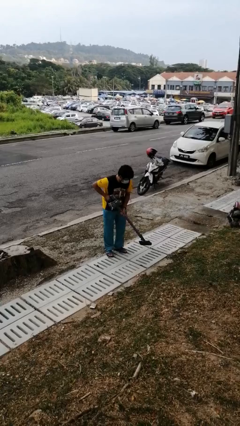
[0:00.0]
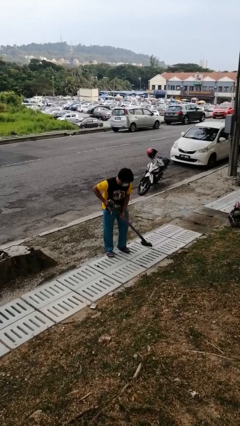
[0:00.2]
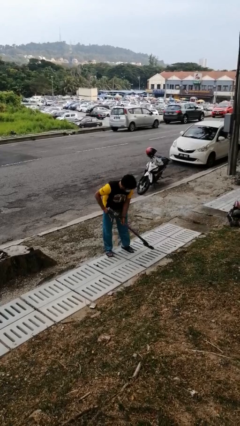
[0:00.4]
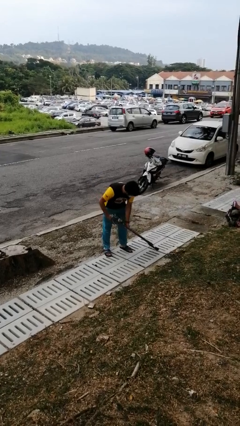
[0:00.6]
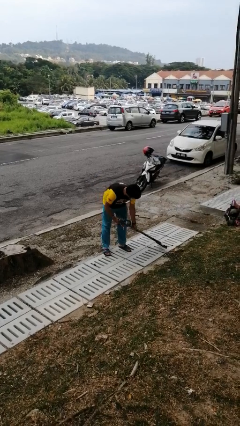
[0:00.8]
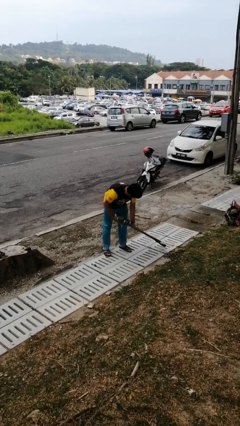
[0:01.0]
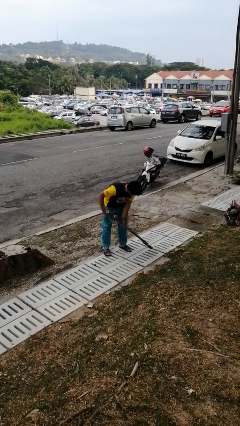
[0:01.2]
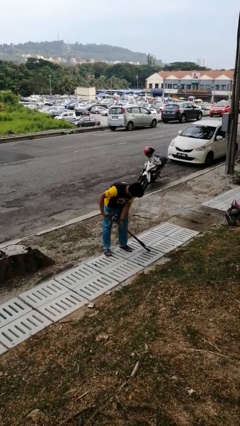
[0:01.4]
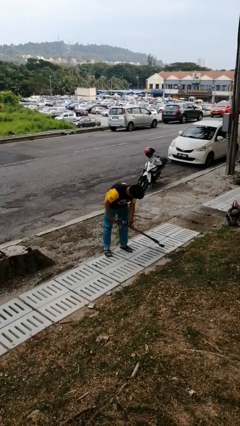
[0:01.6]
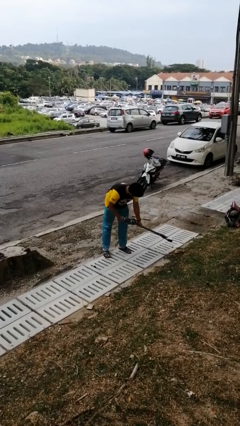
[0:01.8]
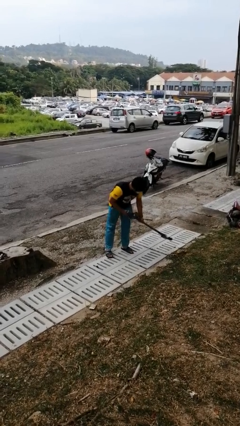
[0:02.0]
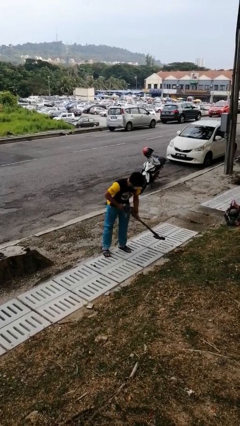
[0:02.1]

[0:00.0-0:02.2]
person vacuums carpet

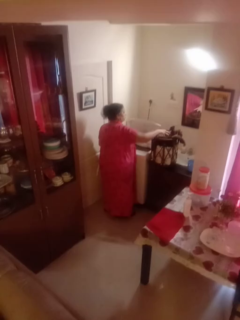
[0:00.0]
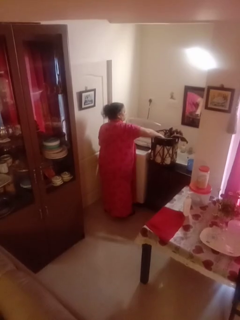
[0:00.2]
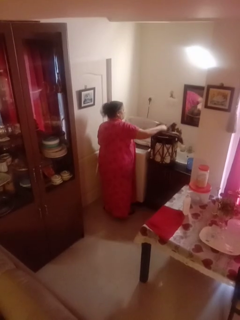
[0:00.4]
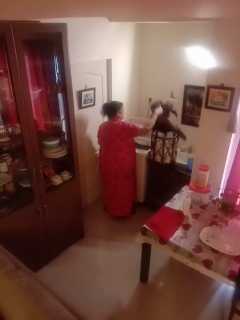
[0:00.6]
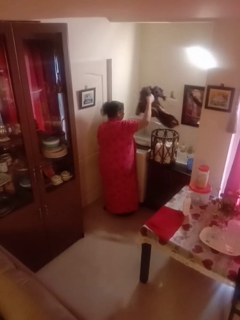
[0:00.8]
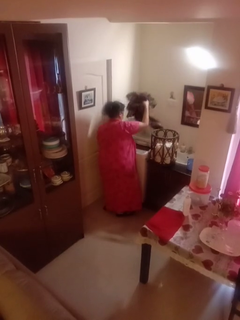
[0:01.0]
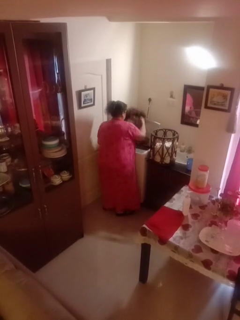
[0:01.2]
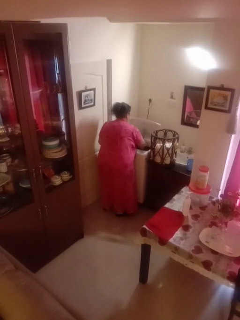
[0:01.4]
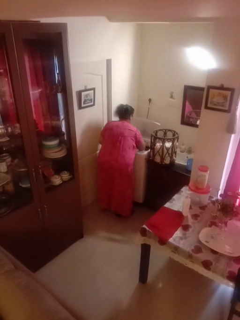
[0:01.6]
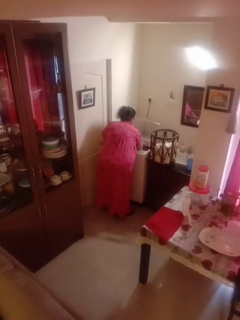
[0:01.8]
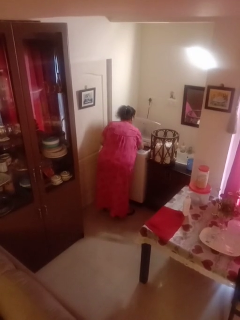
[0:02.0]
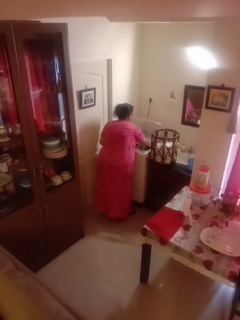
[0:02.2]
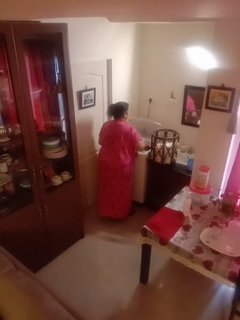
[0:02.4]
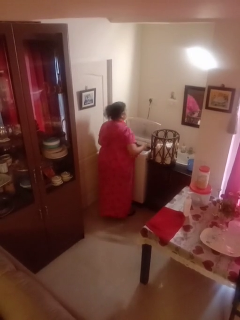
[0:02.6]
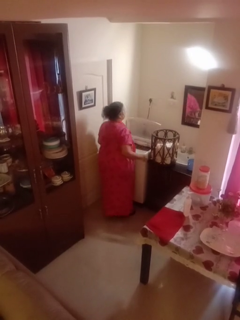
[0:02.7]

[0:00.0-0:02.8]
person loads dryer

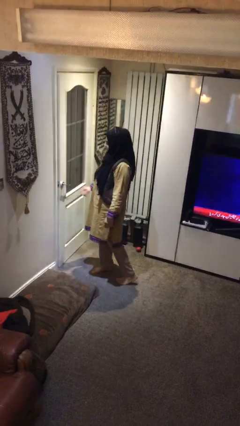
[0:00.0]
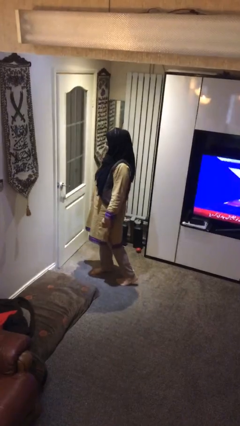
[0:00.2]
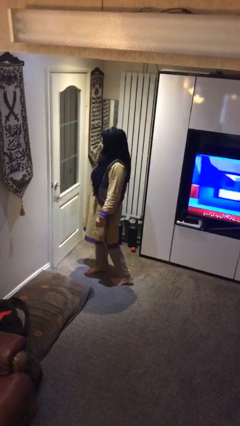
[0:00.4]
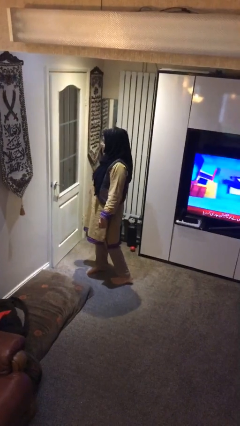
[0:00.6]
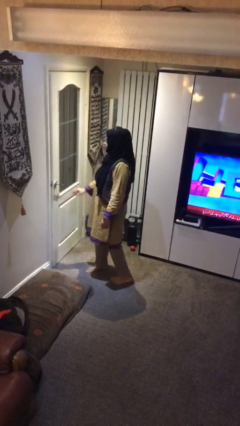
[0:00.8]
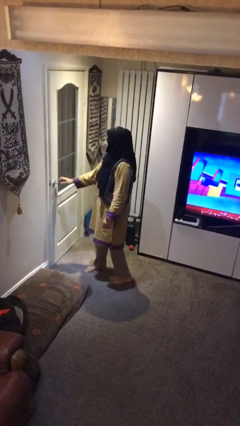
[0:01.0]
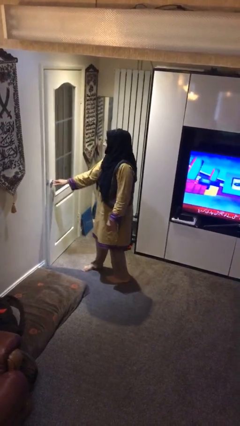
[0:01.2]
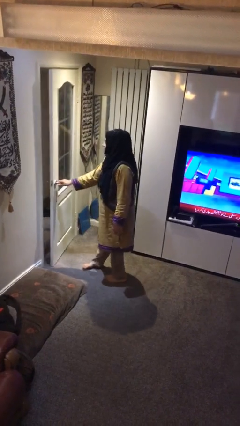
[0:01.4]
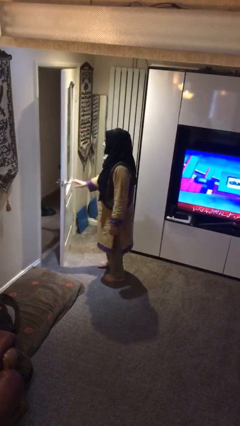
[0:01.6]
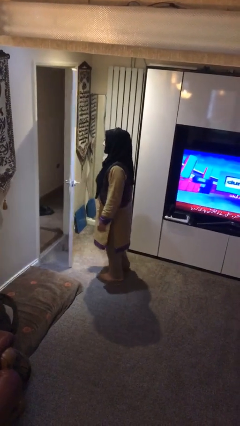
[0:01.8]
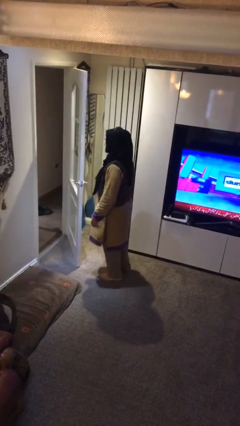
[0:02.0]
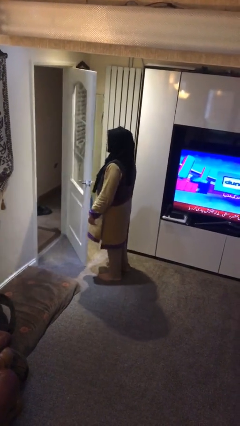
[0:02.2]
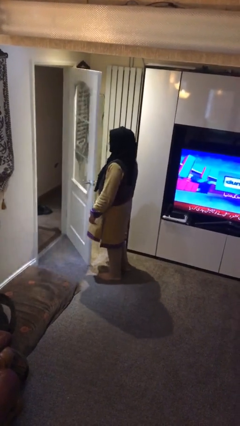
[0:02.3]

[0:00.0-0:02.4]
person opens facility door

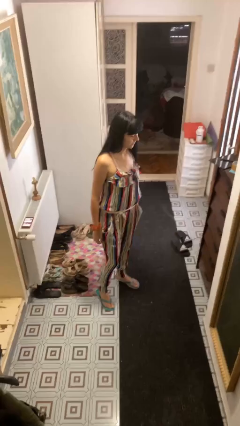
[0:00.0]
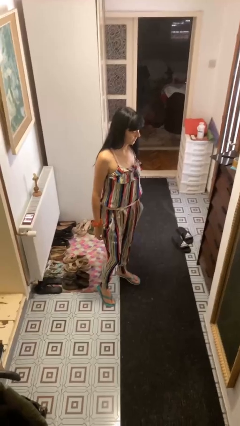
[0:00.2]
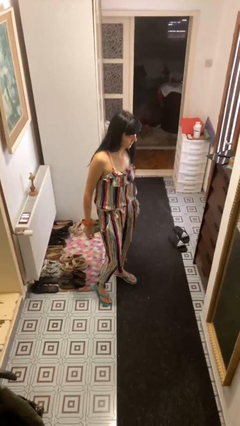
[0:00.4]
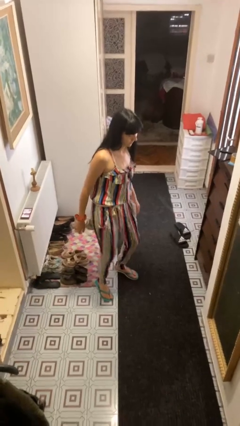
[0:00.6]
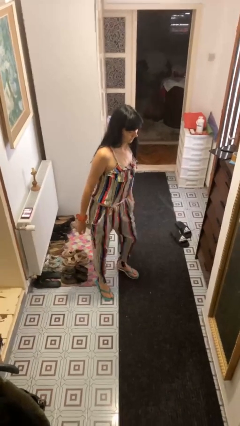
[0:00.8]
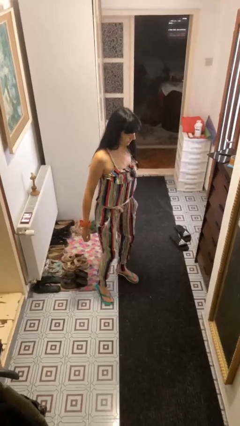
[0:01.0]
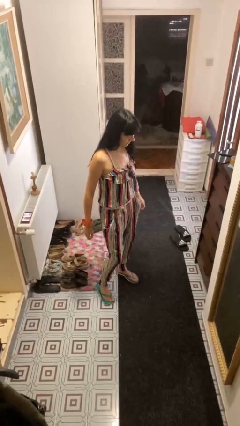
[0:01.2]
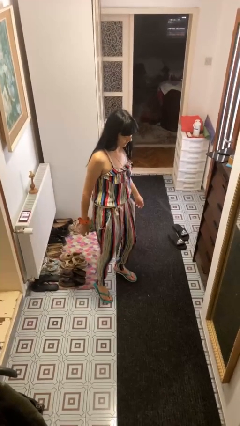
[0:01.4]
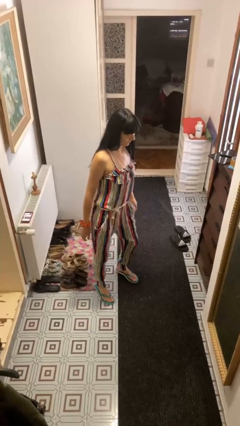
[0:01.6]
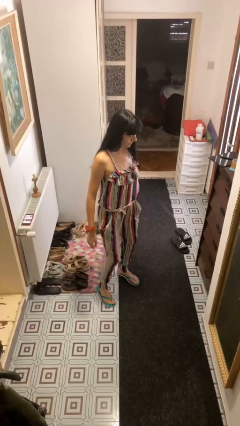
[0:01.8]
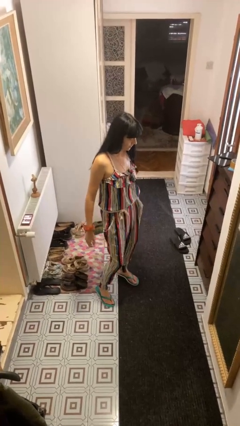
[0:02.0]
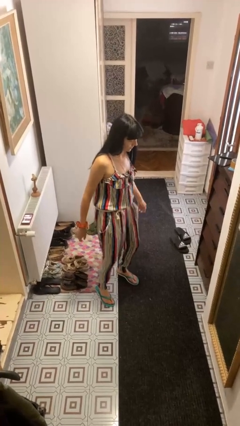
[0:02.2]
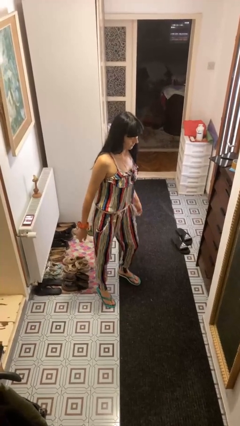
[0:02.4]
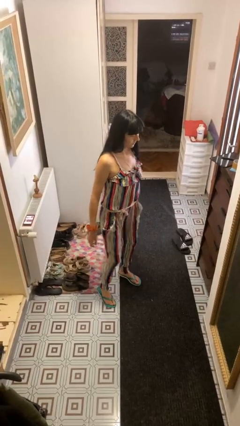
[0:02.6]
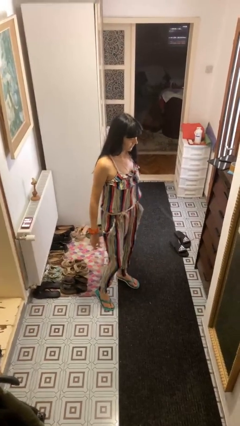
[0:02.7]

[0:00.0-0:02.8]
person wiggles hips

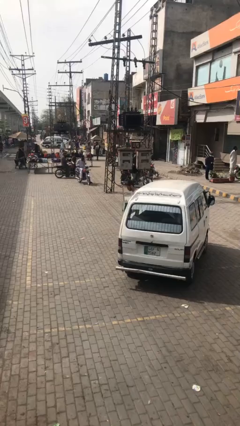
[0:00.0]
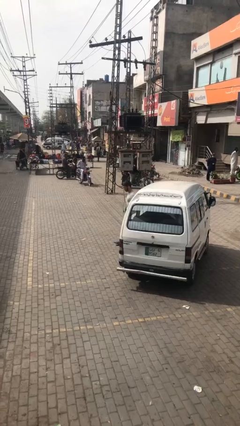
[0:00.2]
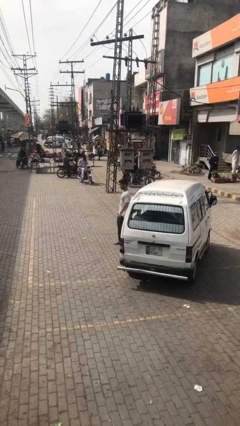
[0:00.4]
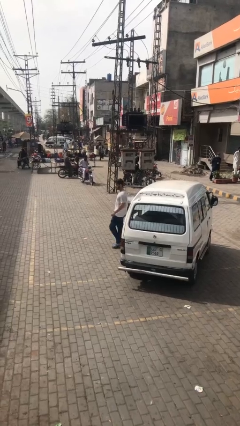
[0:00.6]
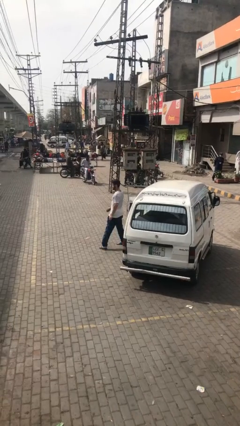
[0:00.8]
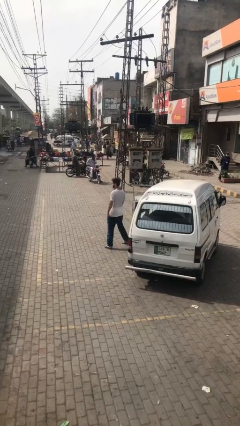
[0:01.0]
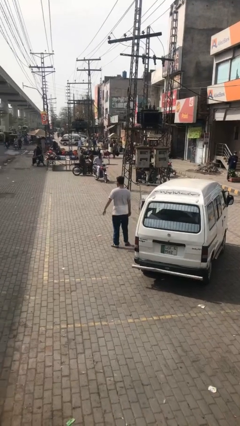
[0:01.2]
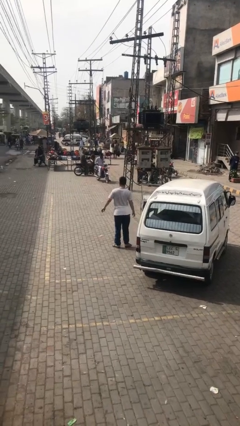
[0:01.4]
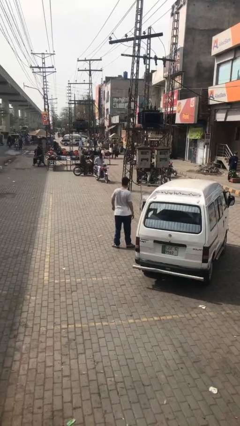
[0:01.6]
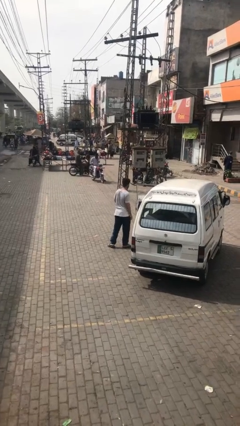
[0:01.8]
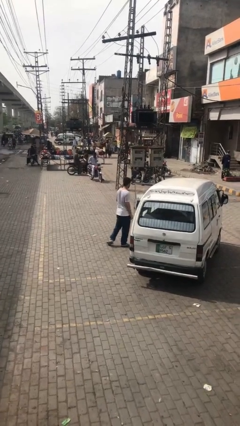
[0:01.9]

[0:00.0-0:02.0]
person exits car

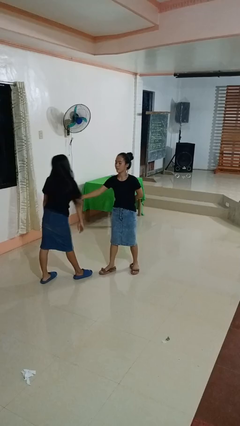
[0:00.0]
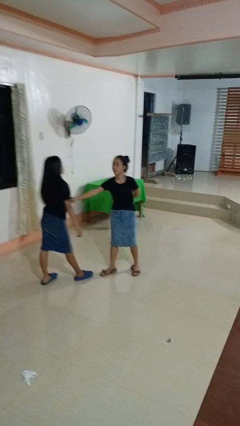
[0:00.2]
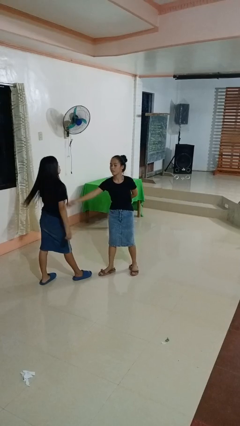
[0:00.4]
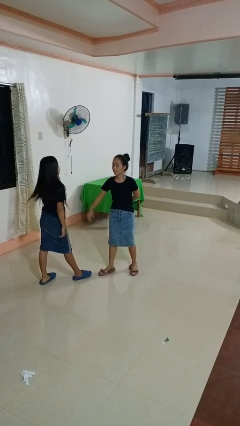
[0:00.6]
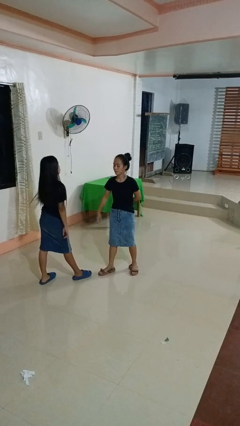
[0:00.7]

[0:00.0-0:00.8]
person grabs person by bicep

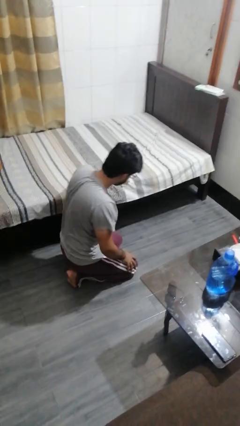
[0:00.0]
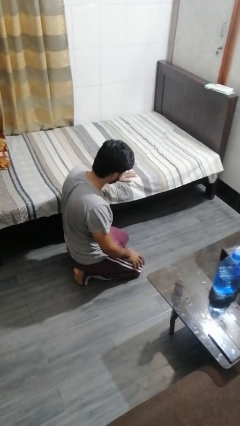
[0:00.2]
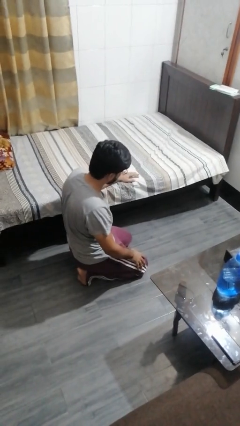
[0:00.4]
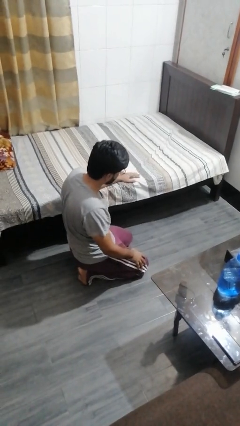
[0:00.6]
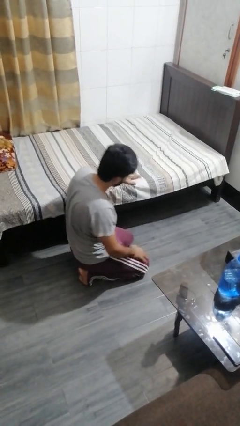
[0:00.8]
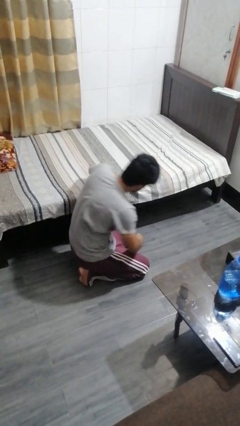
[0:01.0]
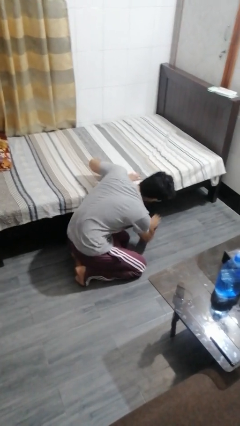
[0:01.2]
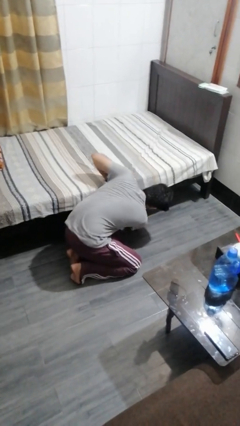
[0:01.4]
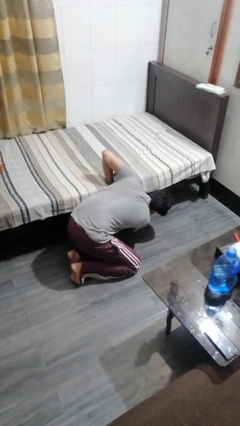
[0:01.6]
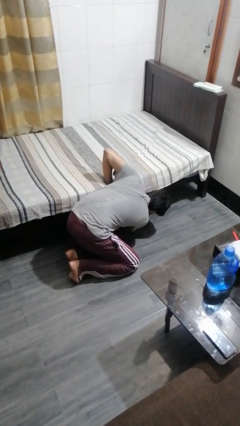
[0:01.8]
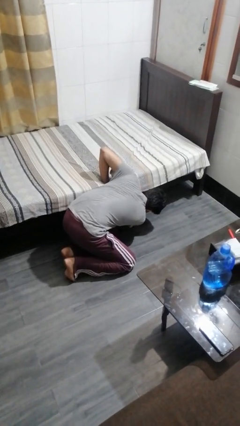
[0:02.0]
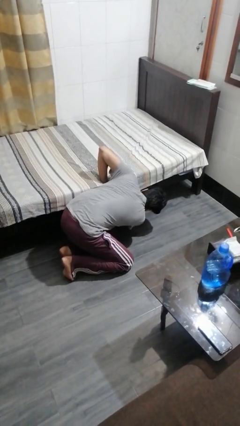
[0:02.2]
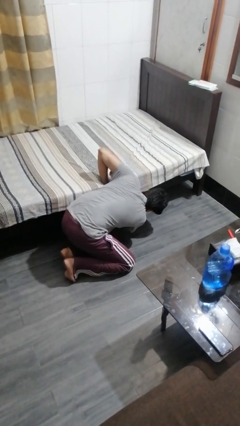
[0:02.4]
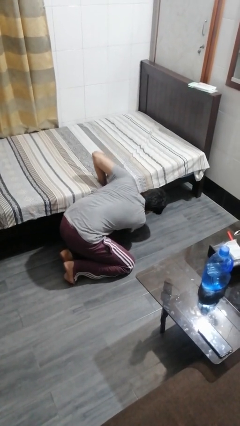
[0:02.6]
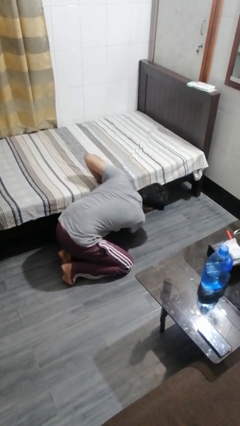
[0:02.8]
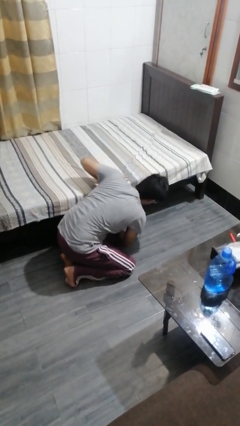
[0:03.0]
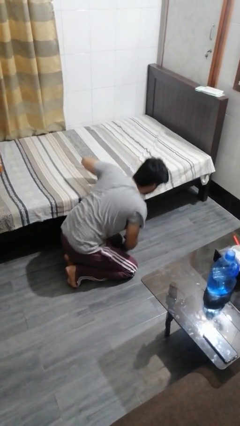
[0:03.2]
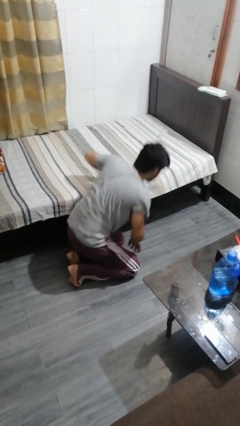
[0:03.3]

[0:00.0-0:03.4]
person searches under bed

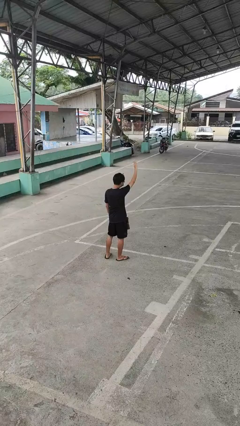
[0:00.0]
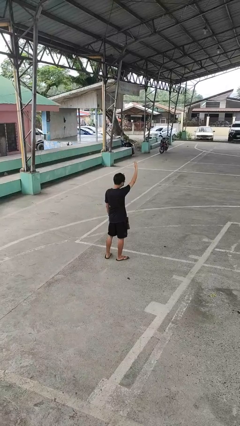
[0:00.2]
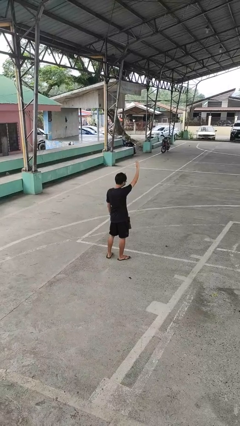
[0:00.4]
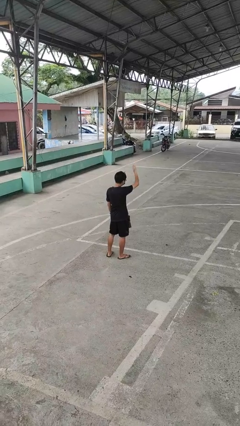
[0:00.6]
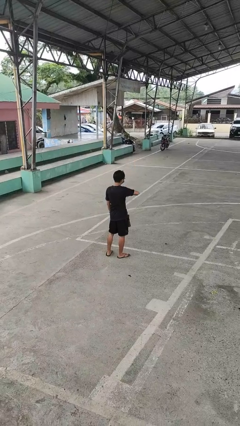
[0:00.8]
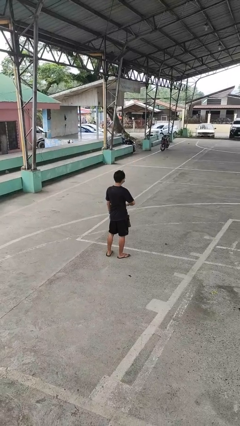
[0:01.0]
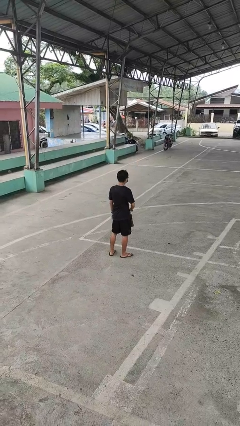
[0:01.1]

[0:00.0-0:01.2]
person gestures swipe down
